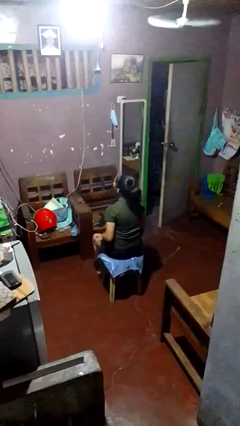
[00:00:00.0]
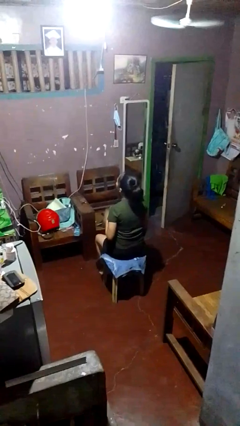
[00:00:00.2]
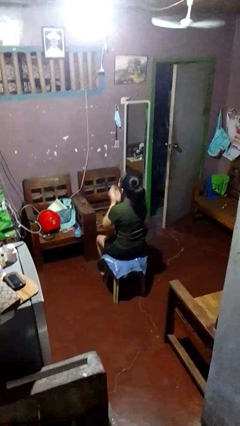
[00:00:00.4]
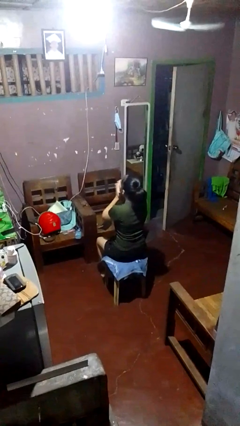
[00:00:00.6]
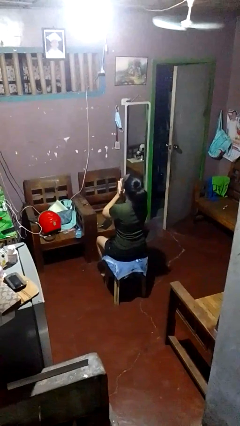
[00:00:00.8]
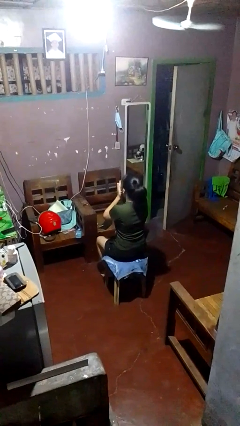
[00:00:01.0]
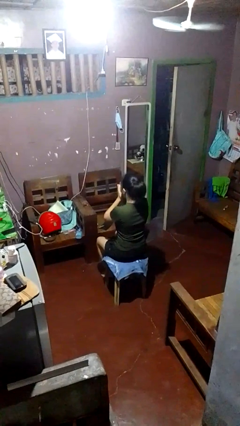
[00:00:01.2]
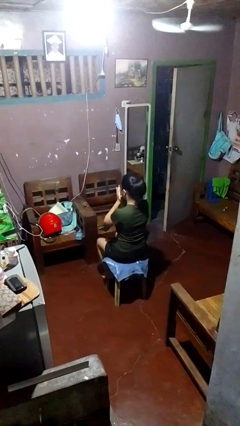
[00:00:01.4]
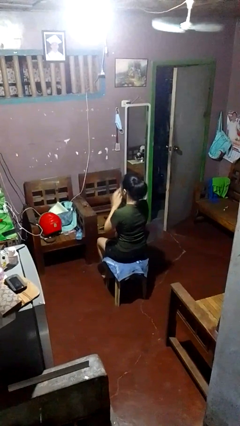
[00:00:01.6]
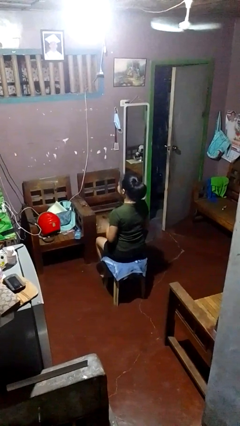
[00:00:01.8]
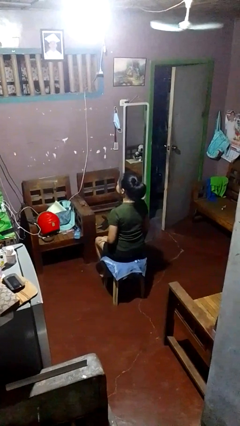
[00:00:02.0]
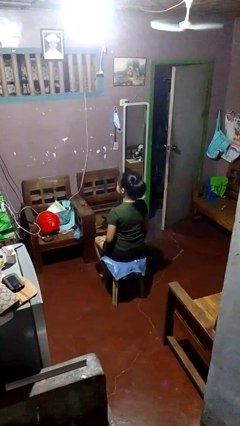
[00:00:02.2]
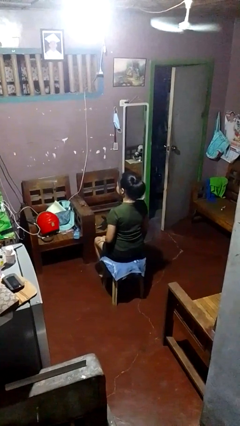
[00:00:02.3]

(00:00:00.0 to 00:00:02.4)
person yawns

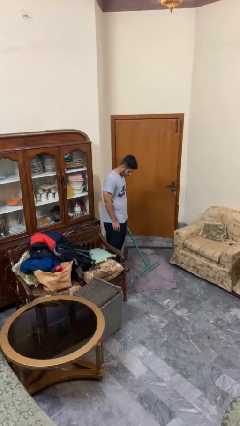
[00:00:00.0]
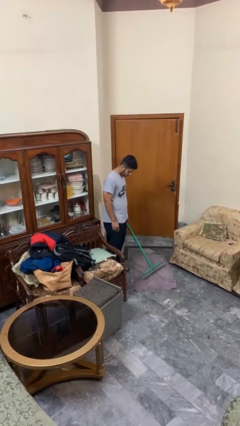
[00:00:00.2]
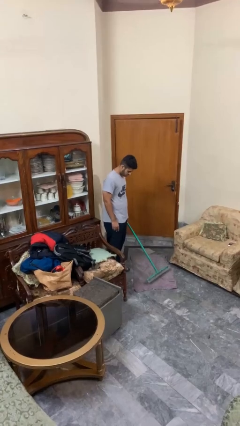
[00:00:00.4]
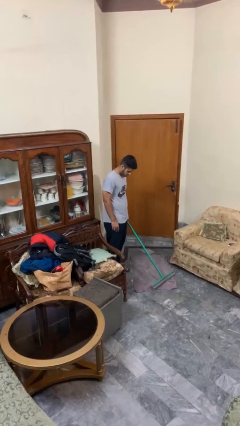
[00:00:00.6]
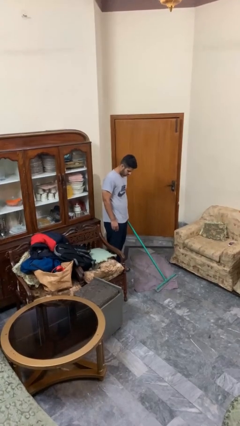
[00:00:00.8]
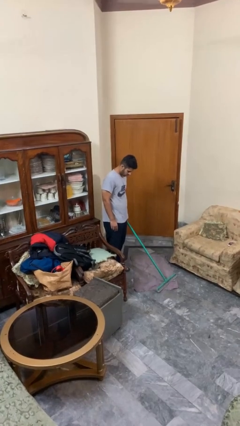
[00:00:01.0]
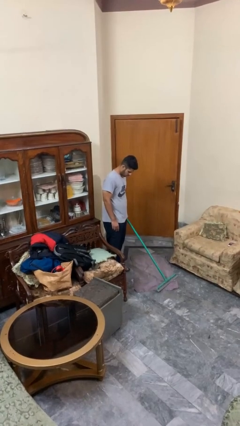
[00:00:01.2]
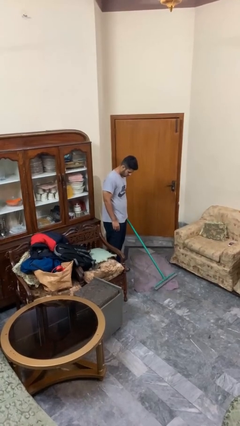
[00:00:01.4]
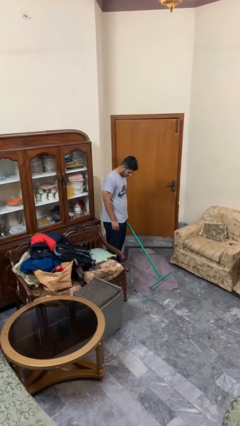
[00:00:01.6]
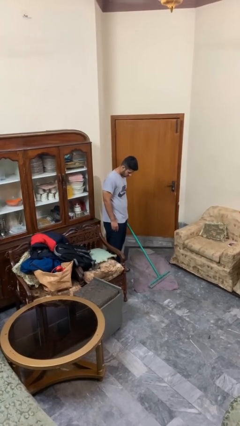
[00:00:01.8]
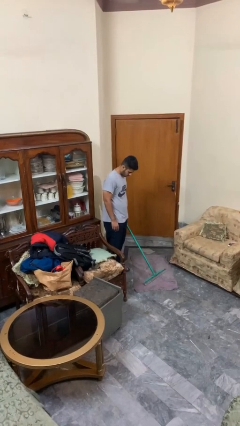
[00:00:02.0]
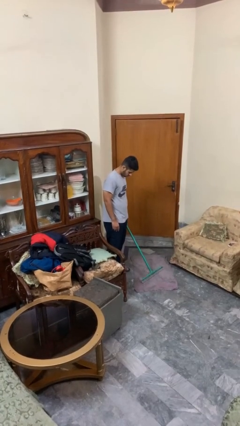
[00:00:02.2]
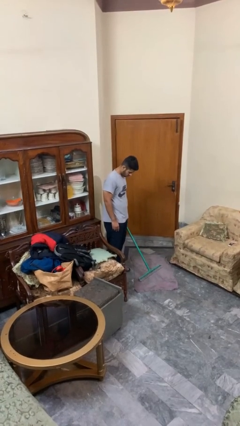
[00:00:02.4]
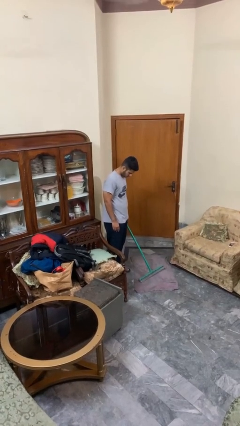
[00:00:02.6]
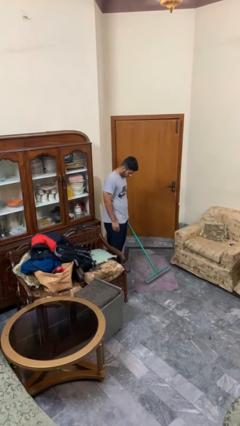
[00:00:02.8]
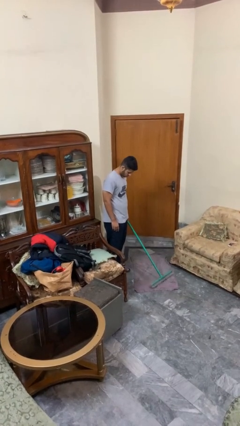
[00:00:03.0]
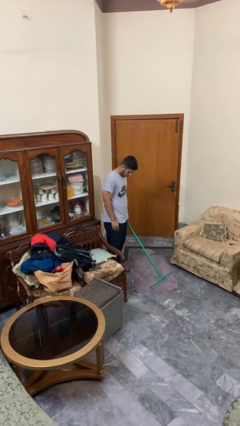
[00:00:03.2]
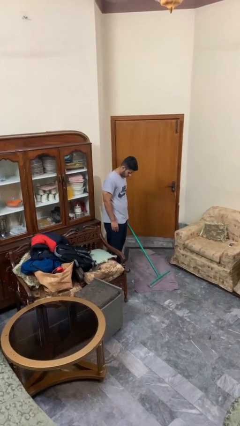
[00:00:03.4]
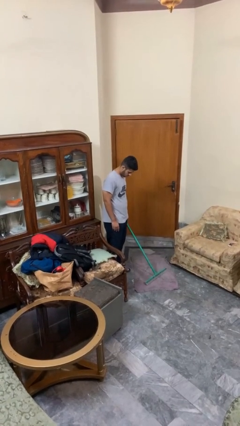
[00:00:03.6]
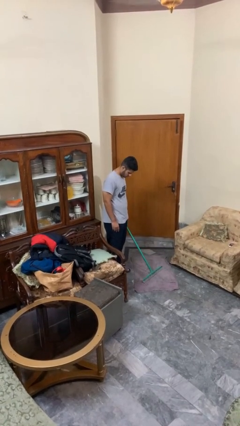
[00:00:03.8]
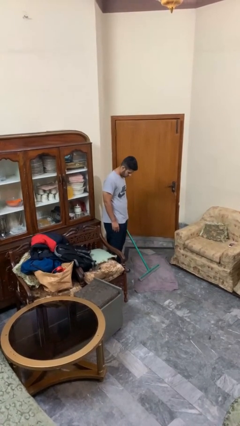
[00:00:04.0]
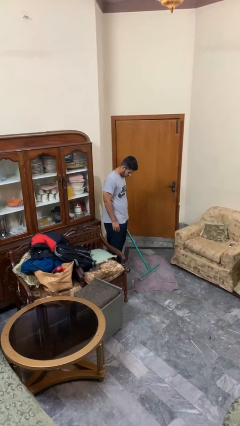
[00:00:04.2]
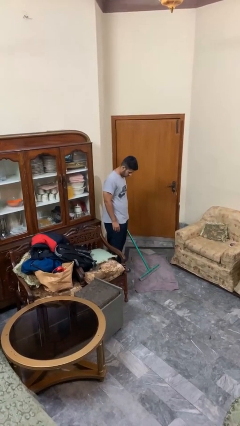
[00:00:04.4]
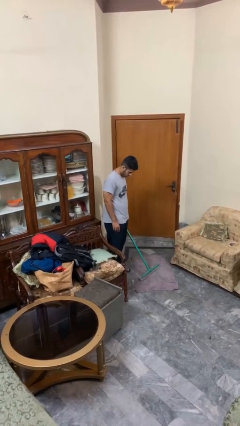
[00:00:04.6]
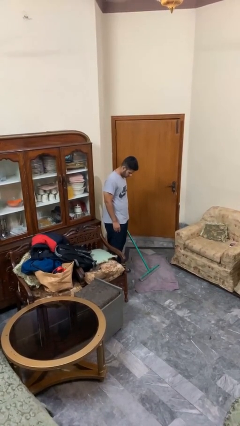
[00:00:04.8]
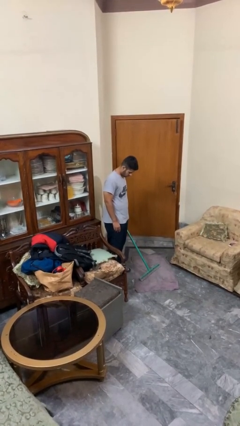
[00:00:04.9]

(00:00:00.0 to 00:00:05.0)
person vacuums carpet

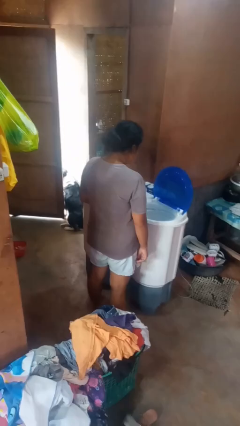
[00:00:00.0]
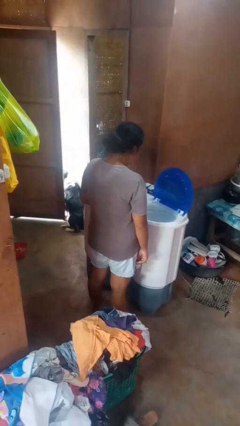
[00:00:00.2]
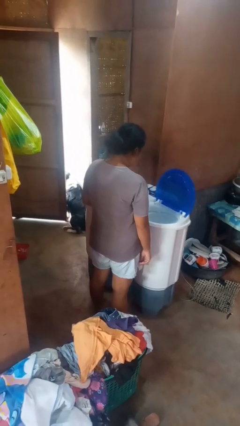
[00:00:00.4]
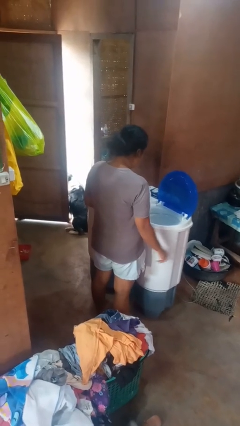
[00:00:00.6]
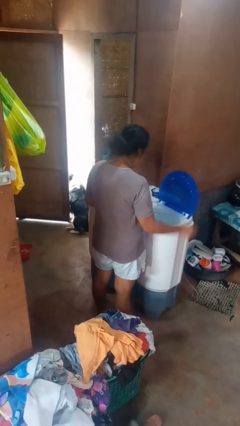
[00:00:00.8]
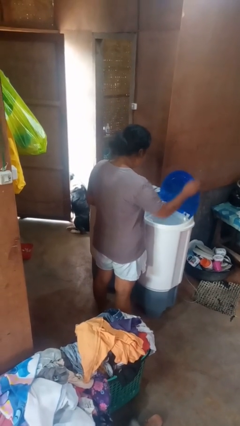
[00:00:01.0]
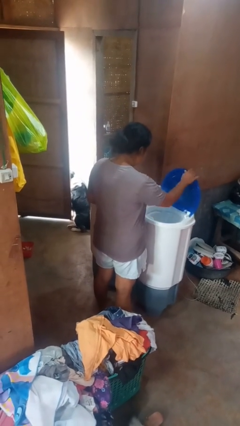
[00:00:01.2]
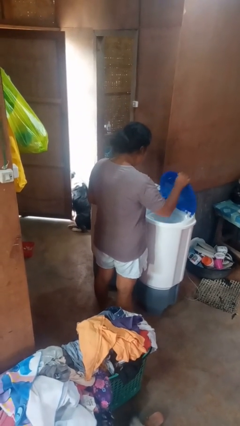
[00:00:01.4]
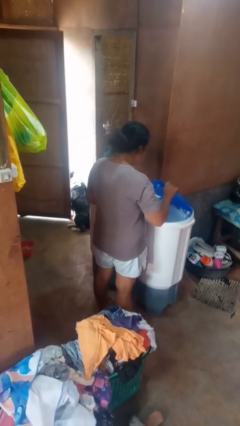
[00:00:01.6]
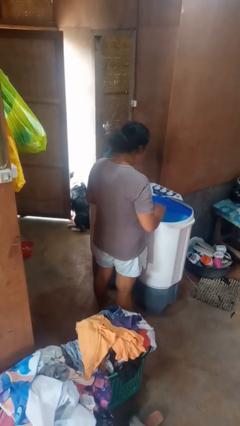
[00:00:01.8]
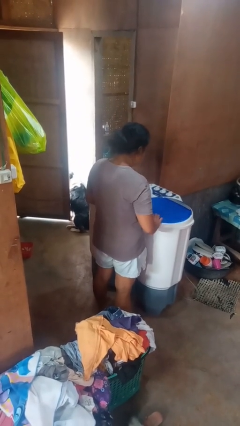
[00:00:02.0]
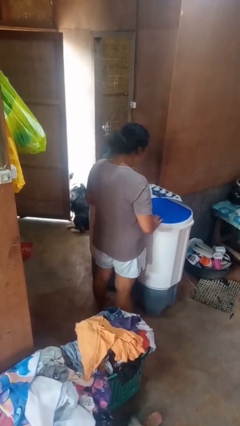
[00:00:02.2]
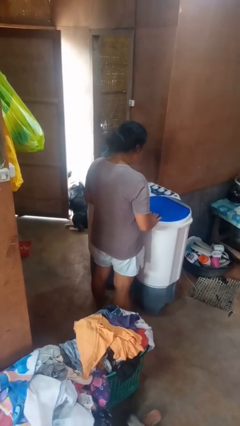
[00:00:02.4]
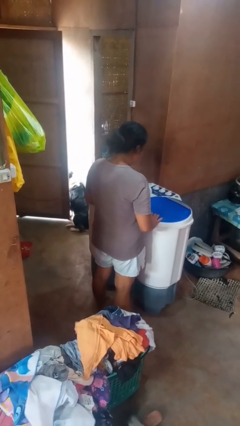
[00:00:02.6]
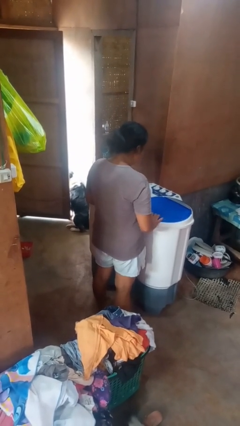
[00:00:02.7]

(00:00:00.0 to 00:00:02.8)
person closes clothes washer

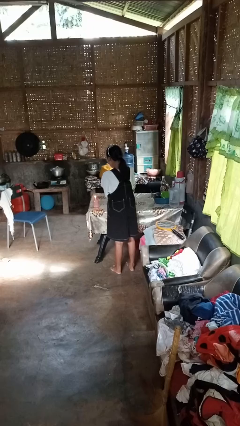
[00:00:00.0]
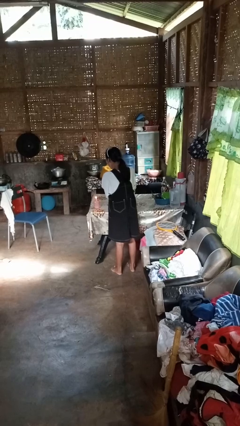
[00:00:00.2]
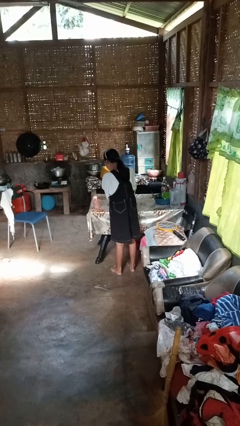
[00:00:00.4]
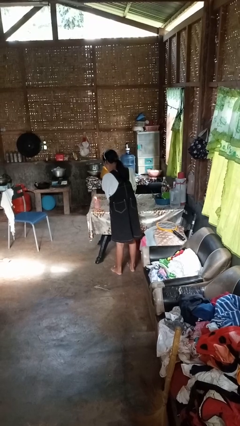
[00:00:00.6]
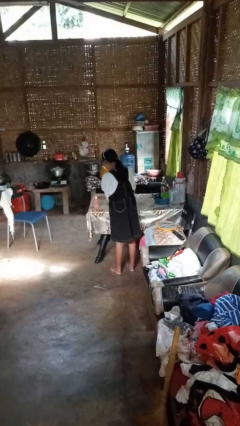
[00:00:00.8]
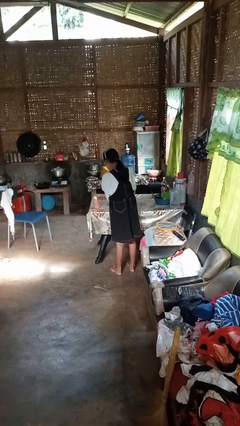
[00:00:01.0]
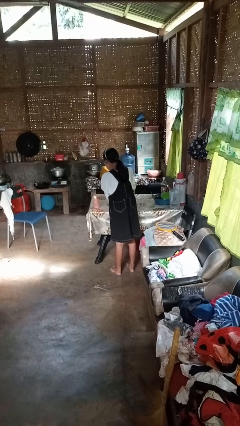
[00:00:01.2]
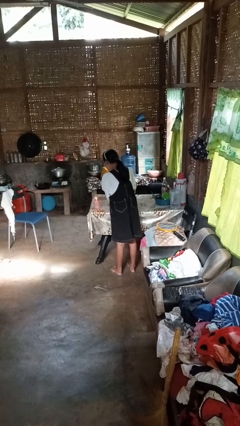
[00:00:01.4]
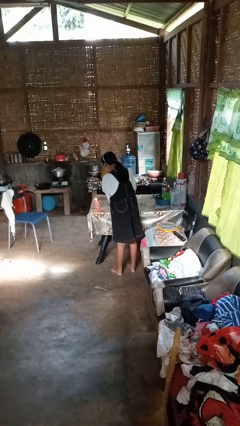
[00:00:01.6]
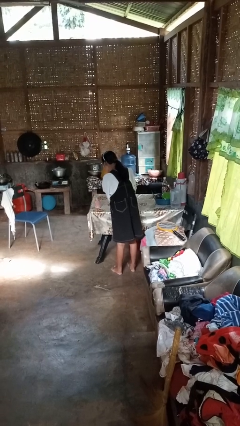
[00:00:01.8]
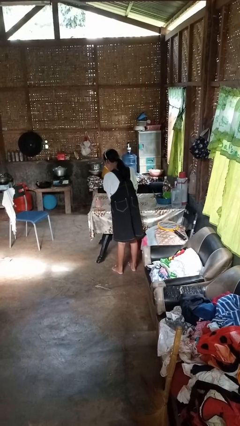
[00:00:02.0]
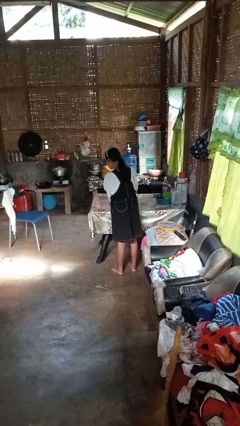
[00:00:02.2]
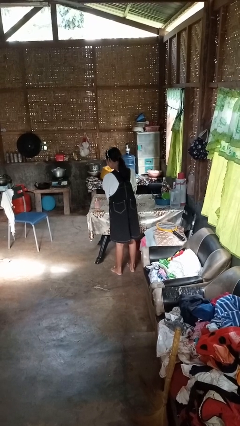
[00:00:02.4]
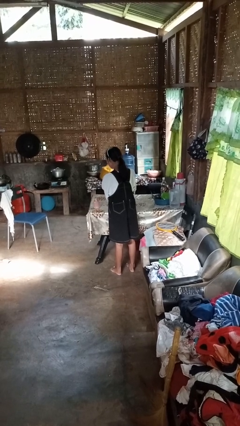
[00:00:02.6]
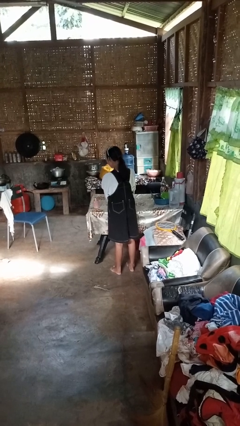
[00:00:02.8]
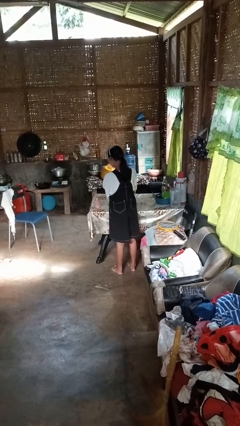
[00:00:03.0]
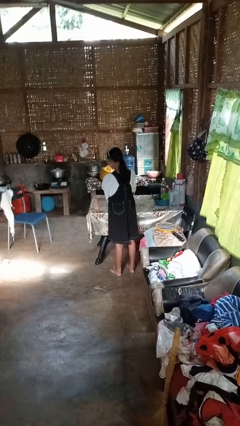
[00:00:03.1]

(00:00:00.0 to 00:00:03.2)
person extinguishes candle

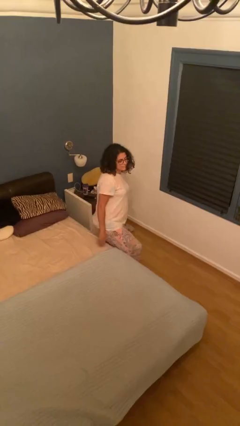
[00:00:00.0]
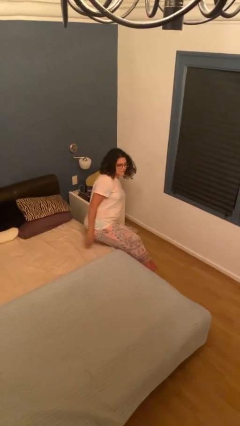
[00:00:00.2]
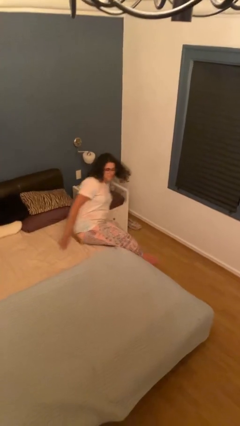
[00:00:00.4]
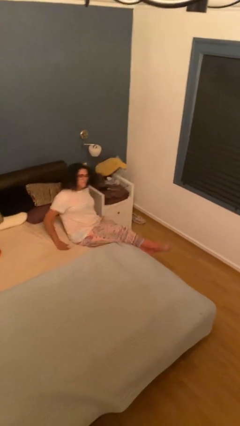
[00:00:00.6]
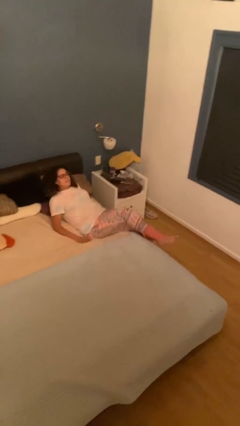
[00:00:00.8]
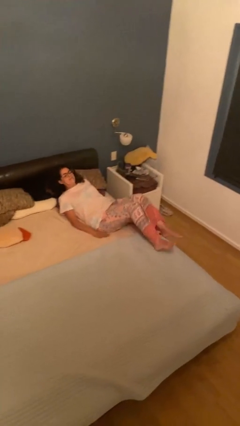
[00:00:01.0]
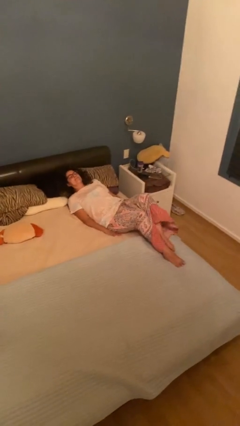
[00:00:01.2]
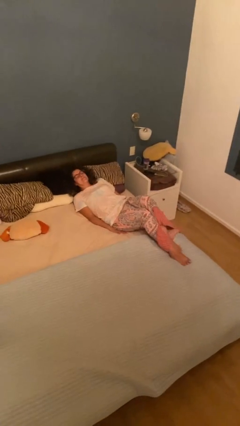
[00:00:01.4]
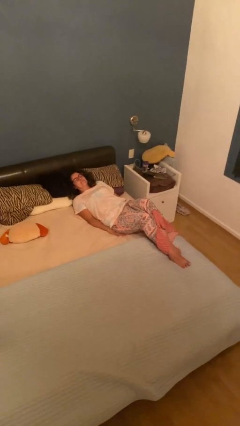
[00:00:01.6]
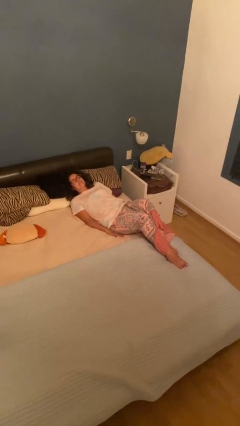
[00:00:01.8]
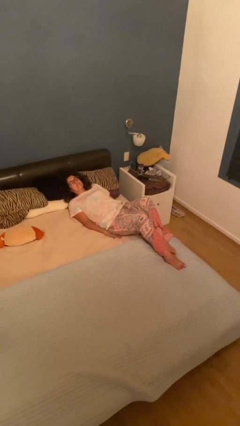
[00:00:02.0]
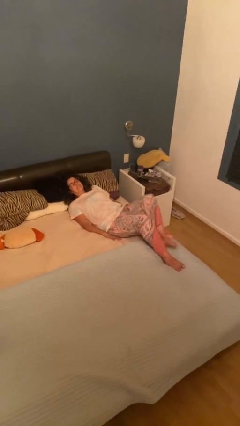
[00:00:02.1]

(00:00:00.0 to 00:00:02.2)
person lies down on bed

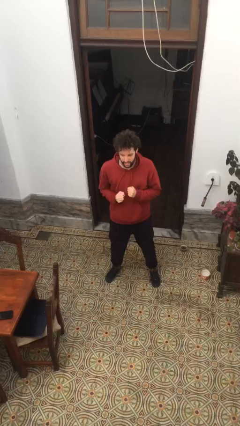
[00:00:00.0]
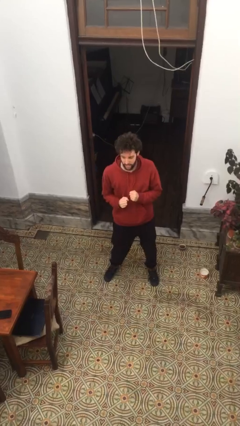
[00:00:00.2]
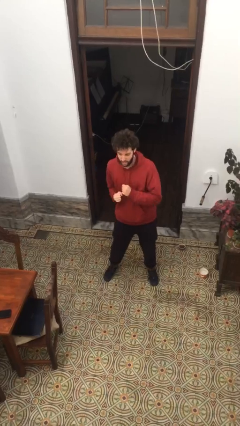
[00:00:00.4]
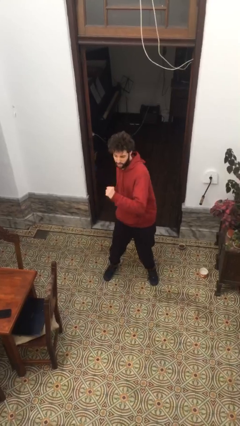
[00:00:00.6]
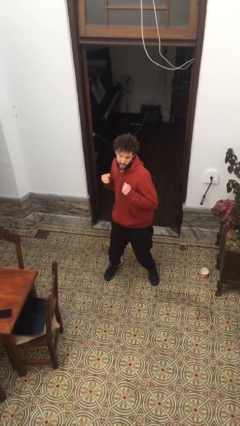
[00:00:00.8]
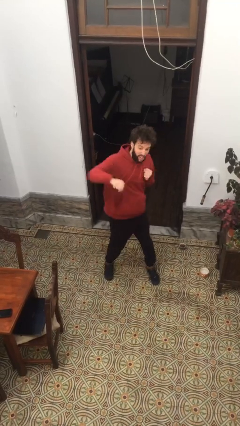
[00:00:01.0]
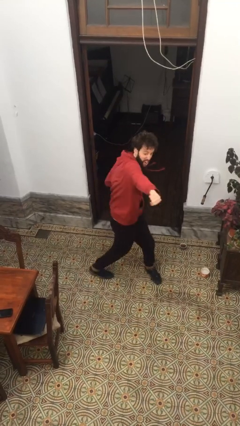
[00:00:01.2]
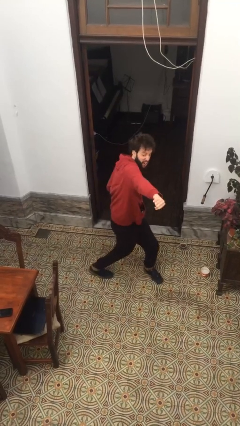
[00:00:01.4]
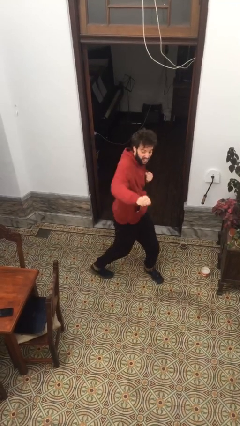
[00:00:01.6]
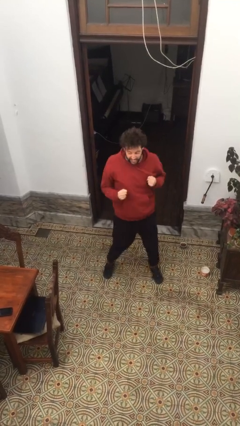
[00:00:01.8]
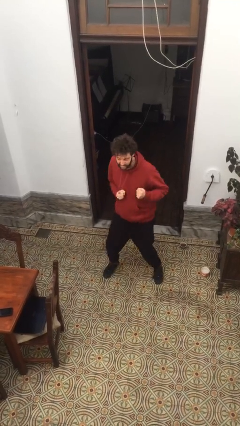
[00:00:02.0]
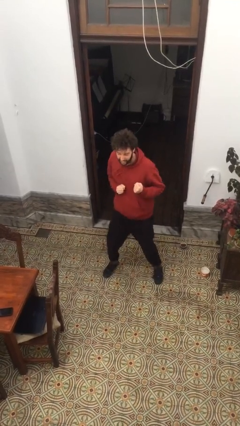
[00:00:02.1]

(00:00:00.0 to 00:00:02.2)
person punches
